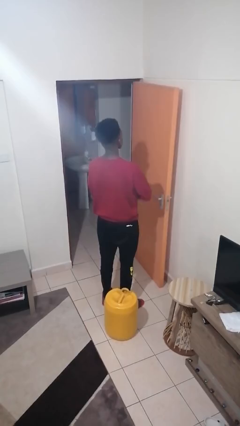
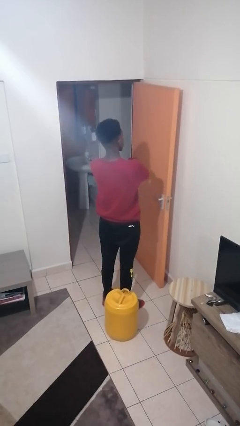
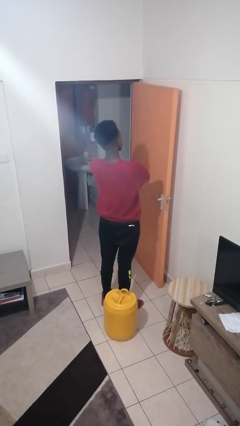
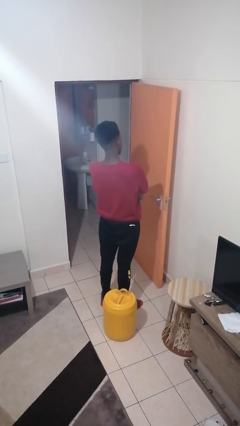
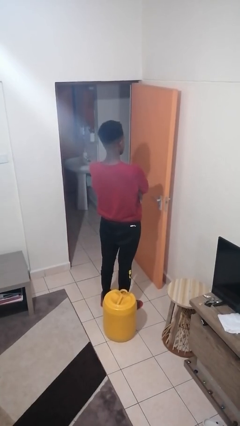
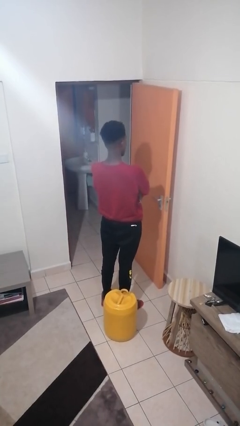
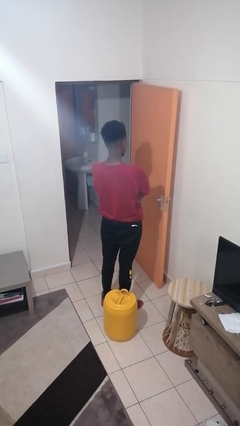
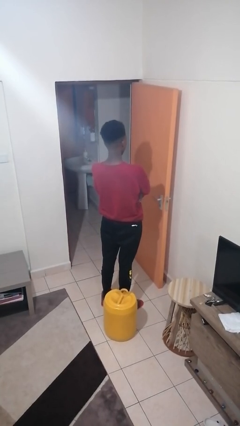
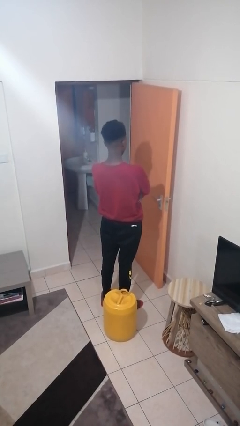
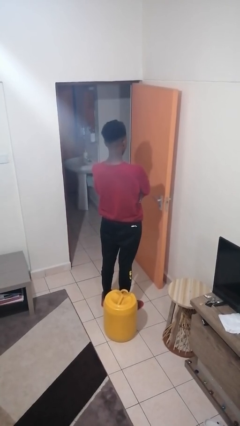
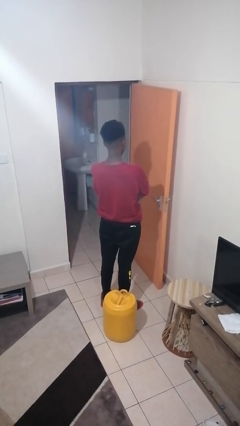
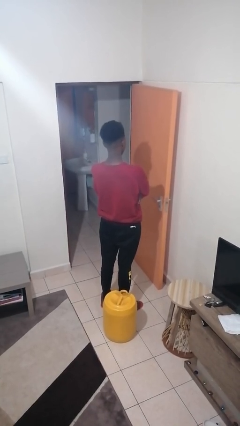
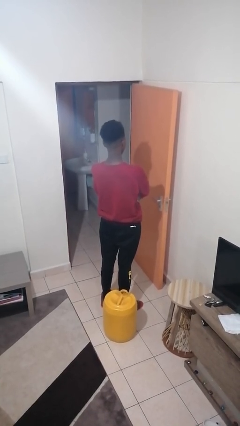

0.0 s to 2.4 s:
person crosses arms

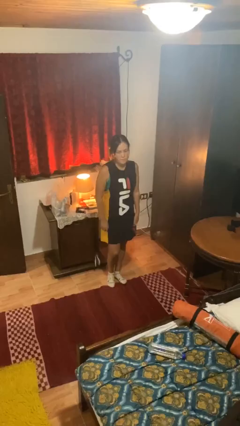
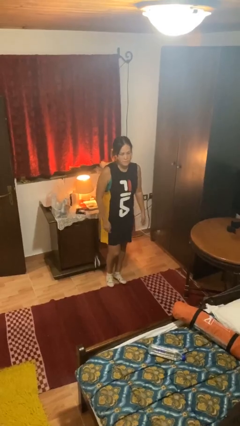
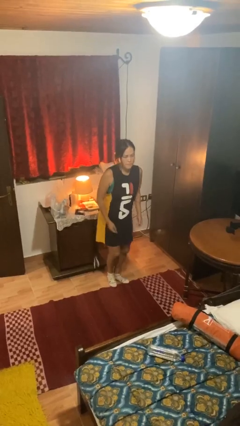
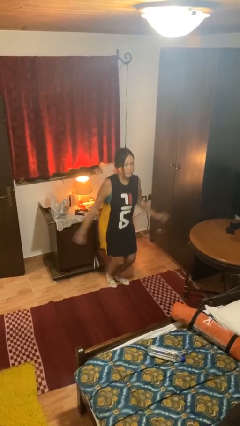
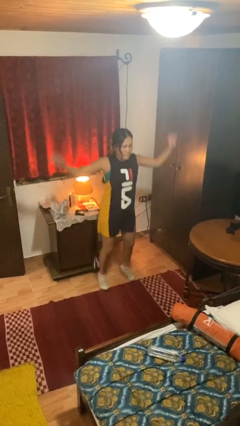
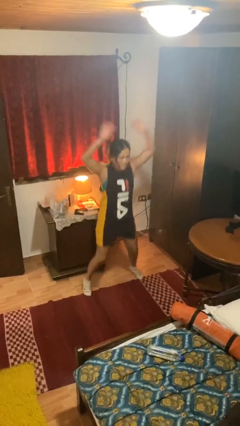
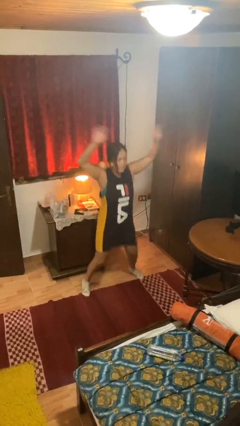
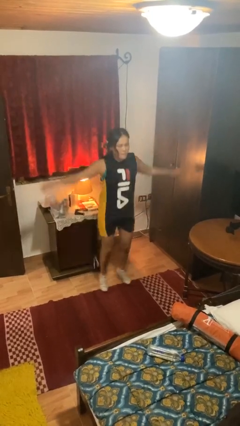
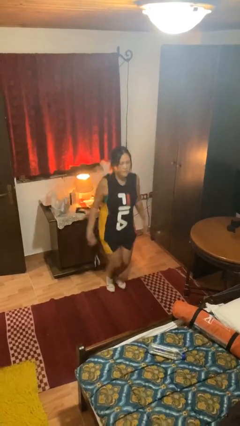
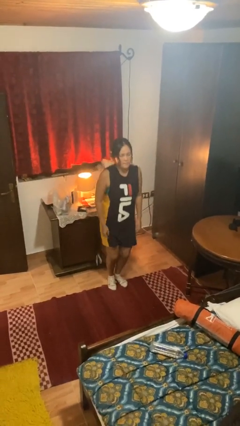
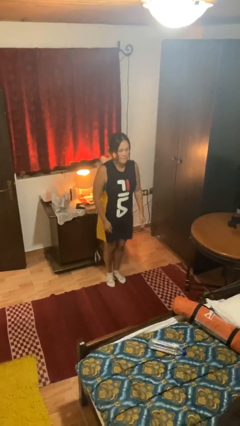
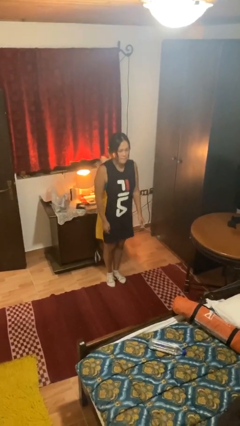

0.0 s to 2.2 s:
person exercises with jumping jacks

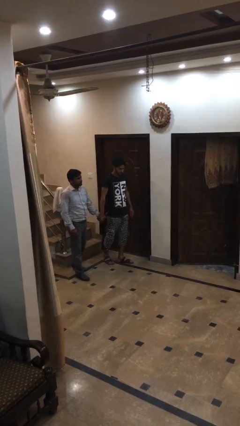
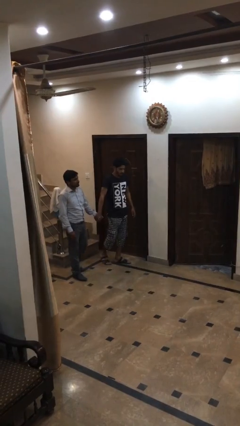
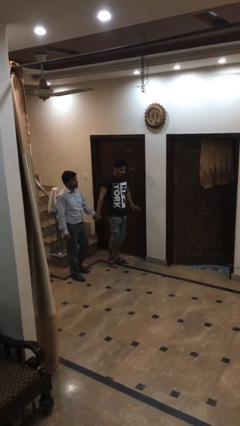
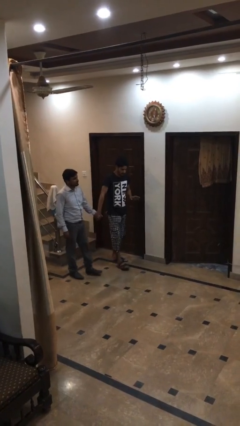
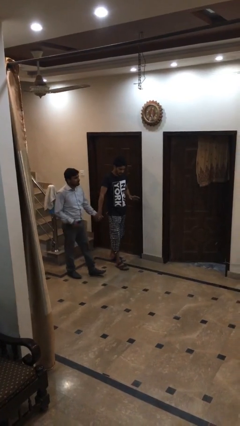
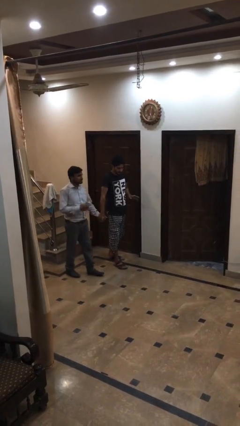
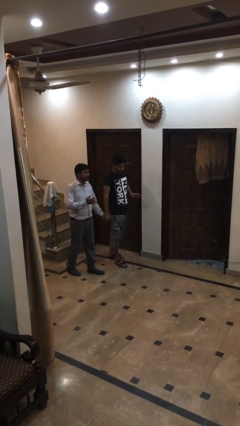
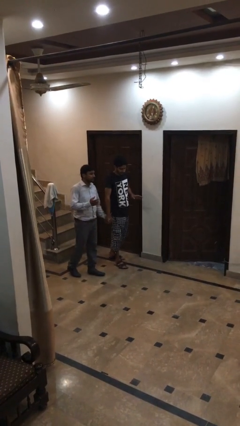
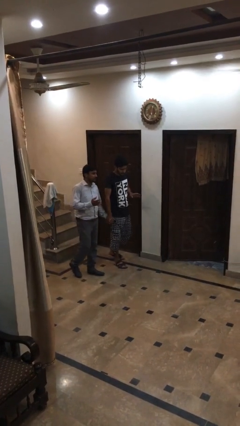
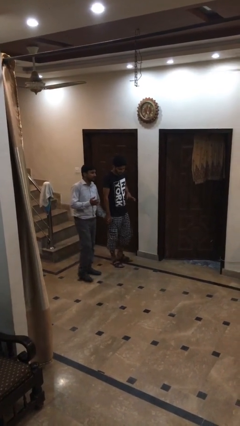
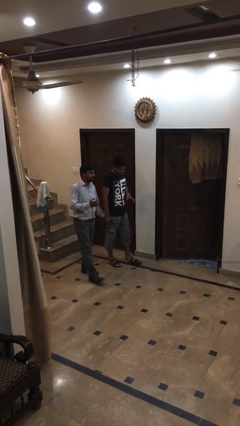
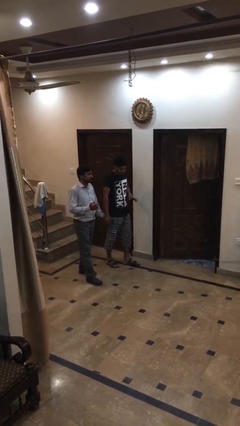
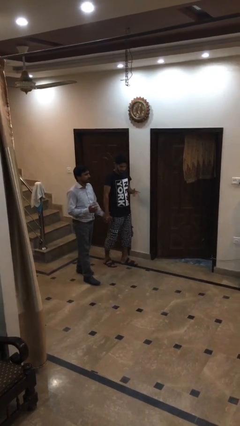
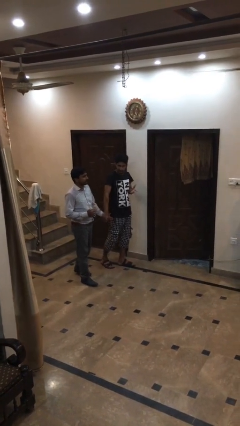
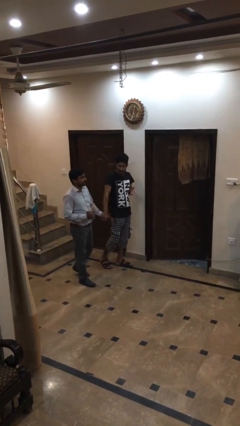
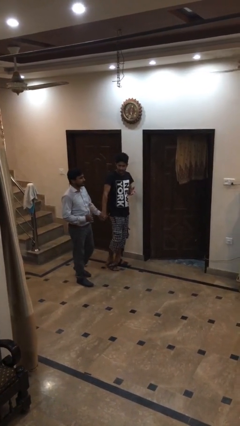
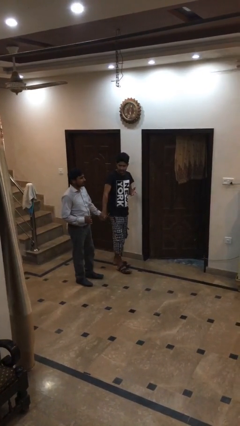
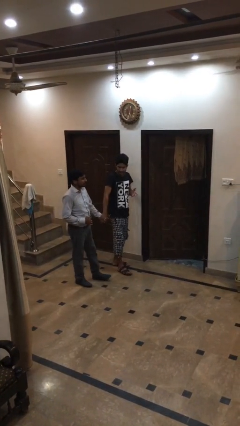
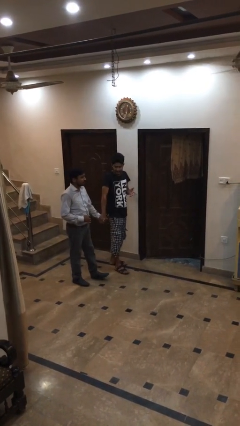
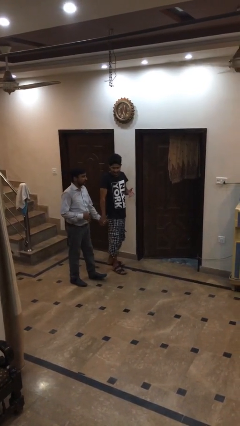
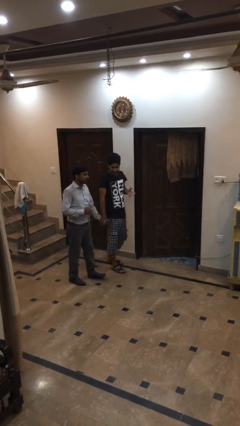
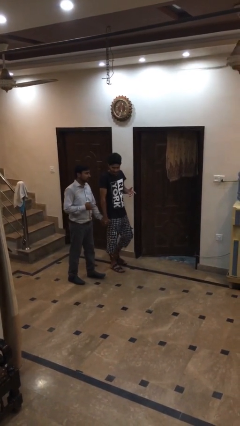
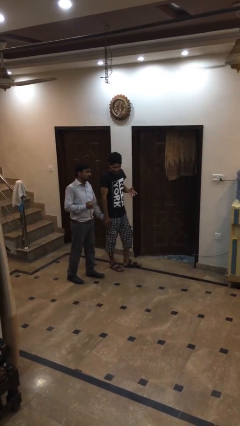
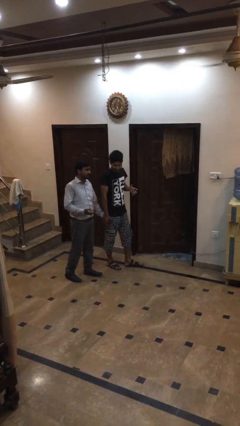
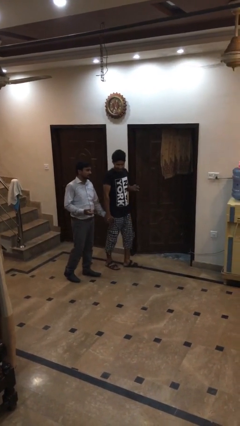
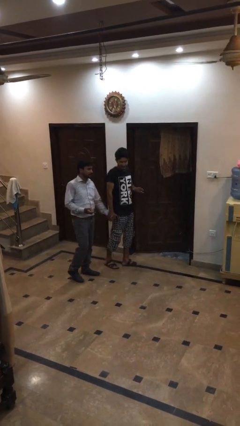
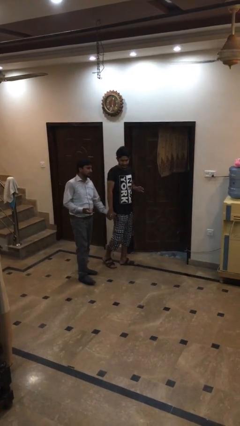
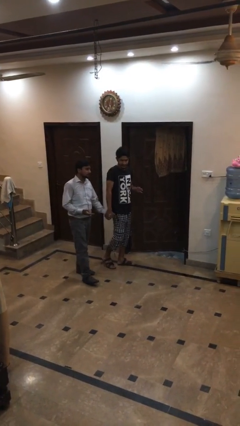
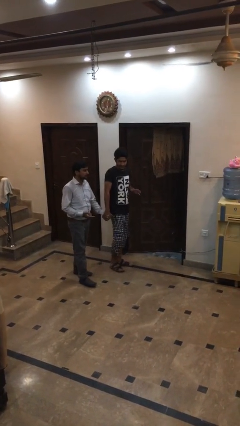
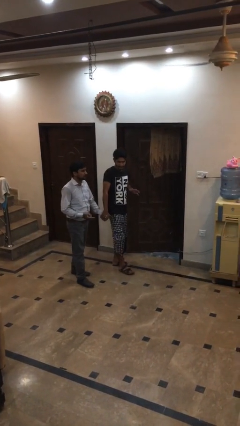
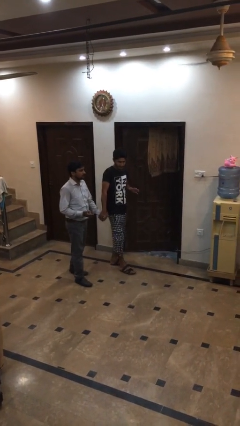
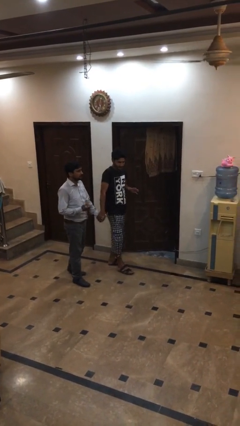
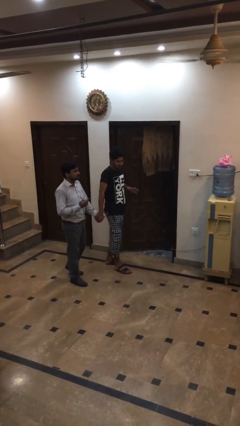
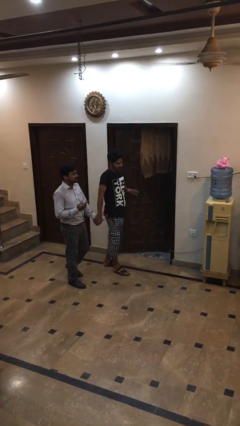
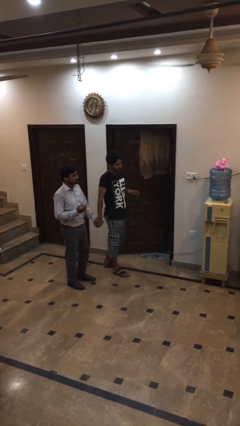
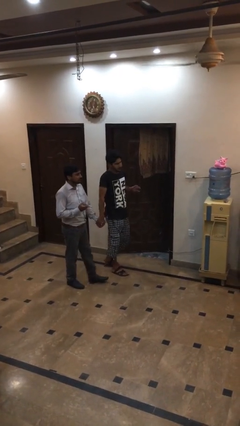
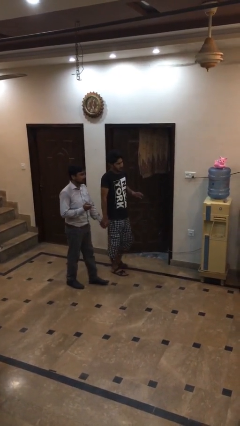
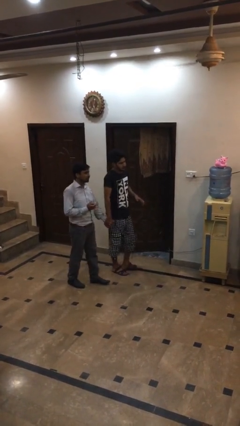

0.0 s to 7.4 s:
person holds hand

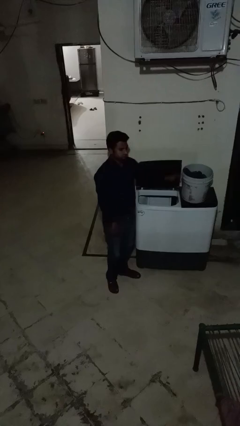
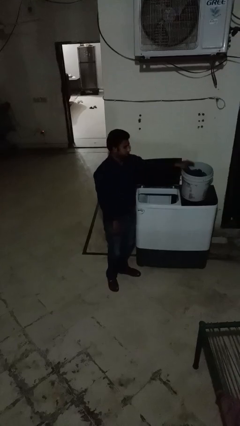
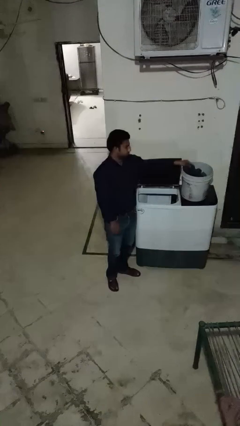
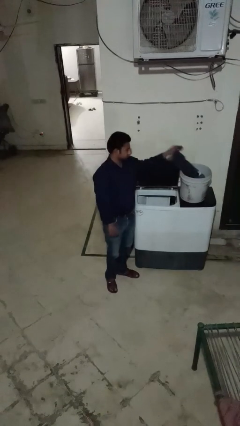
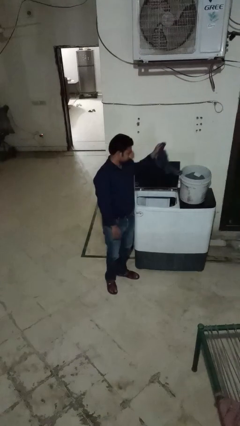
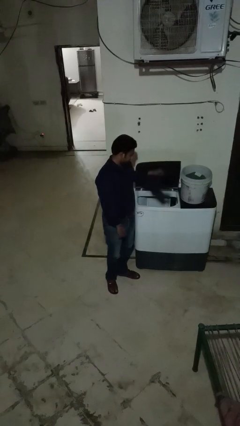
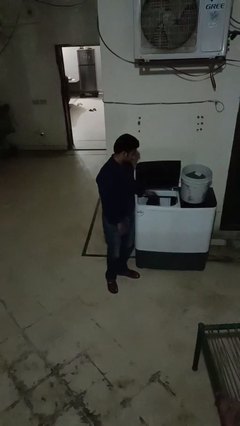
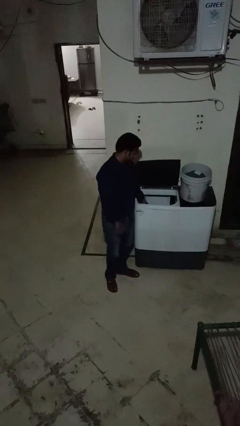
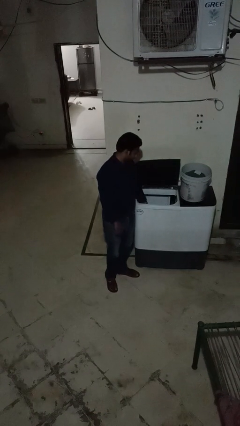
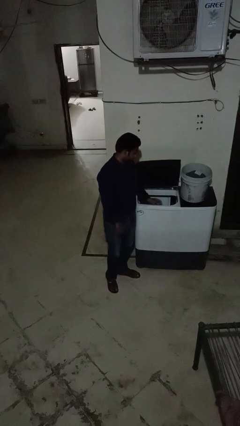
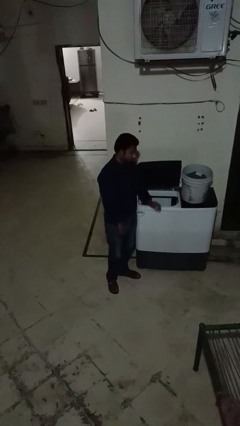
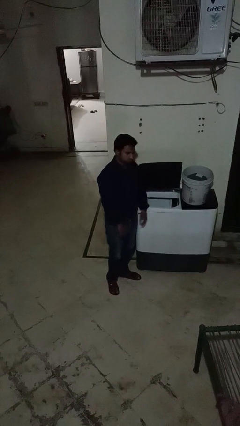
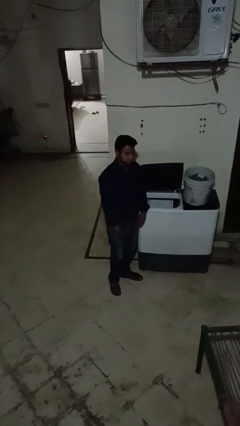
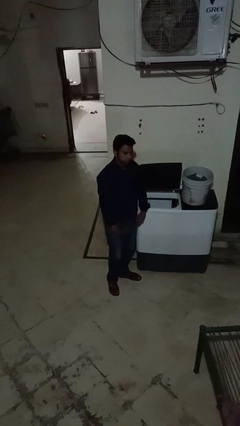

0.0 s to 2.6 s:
person loads clotheswasher

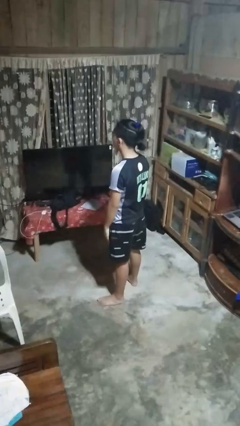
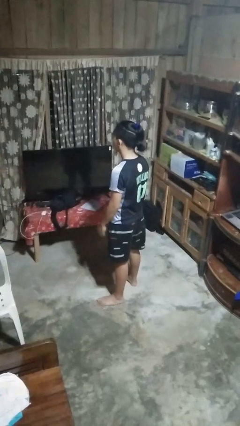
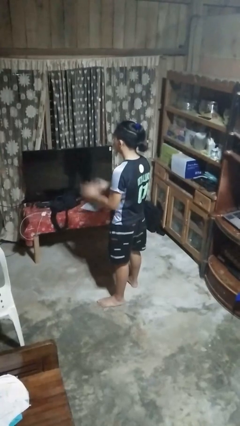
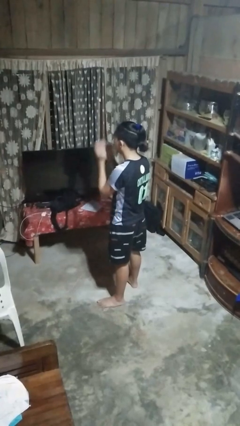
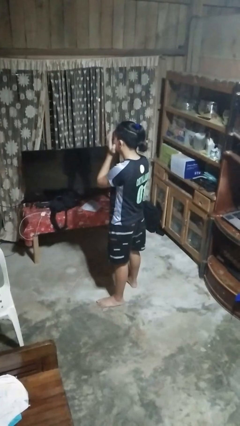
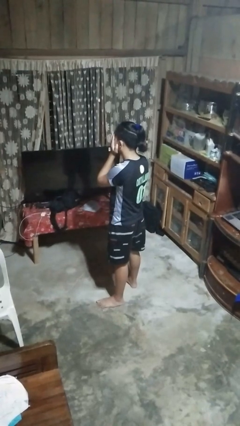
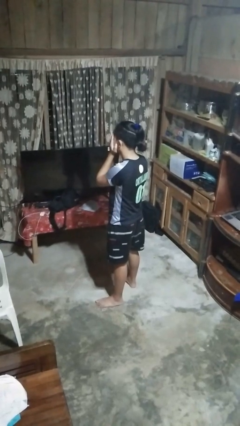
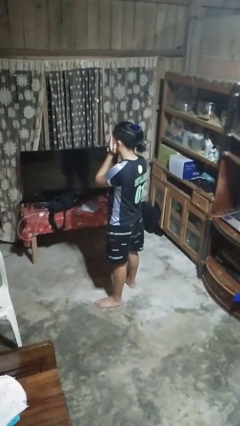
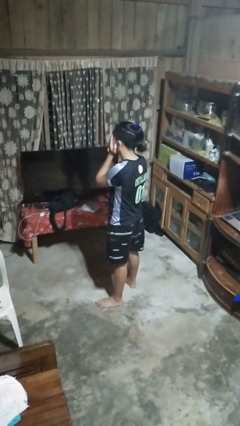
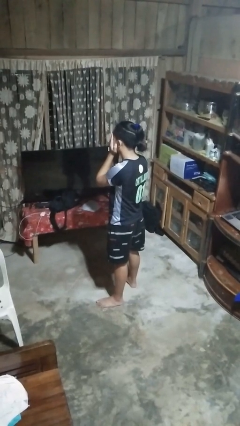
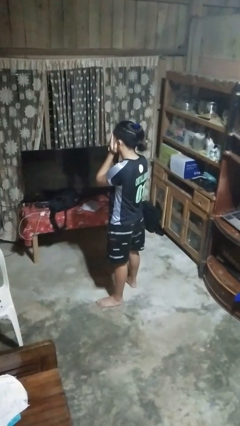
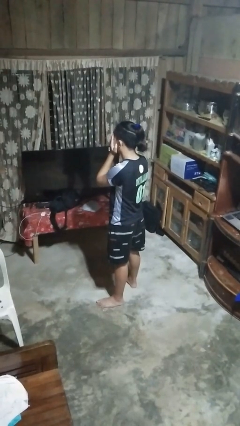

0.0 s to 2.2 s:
person covers face with hands

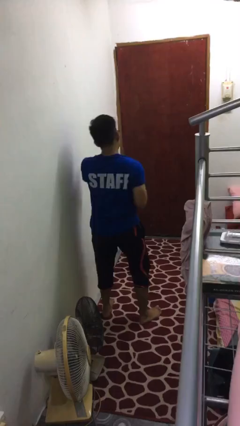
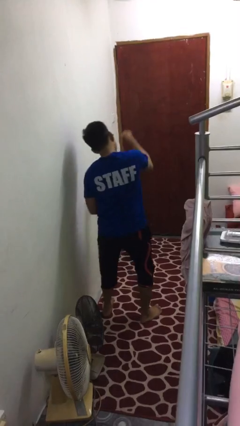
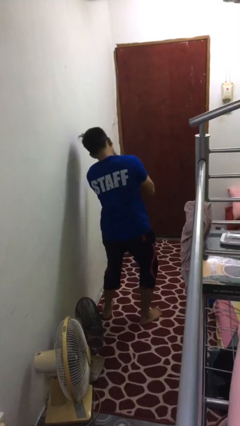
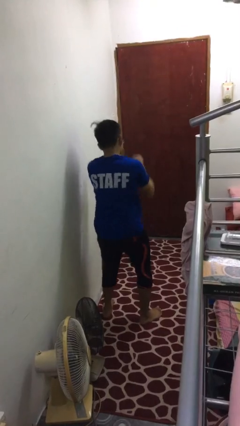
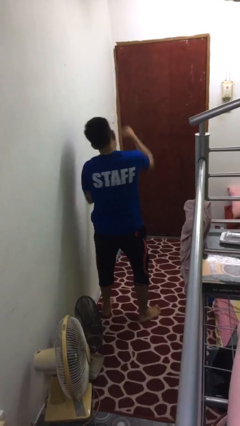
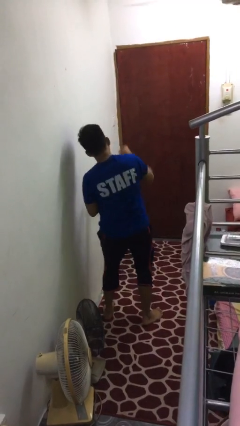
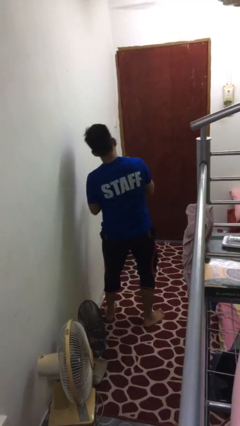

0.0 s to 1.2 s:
person punches
